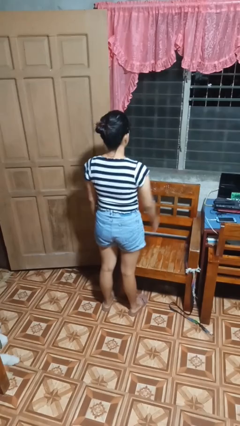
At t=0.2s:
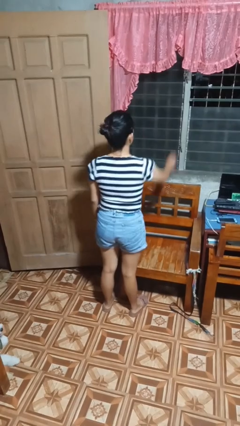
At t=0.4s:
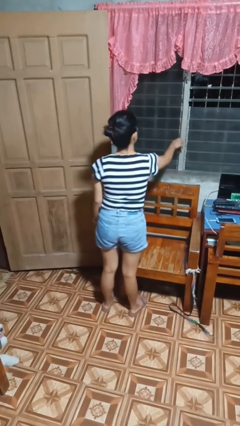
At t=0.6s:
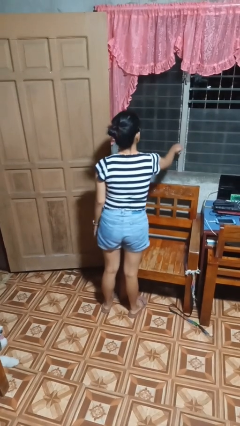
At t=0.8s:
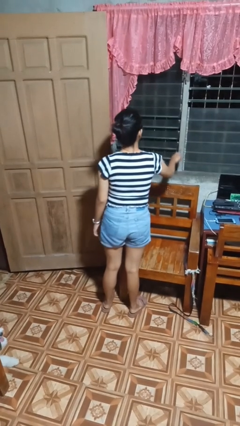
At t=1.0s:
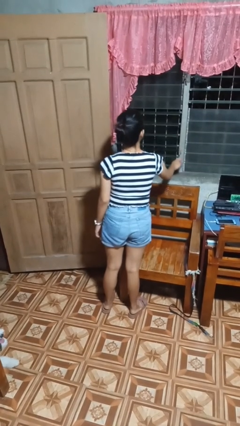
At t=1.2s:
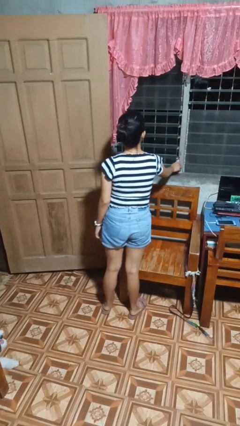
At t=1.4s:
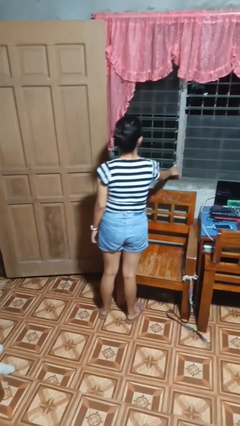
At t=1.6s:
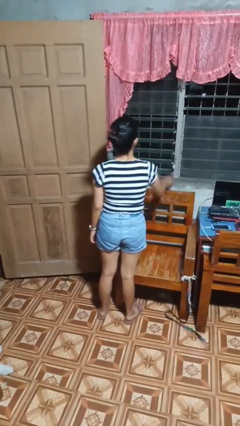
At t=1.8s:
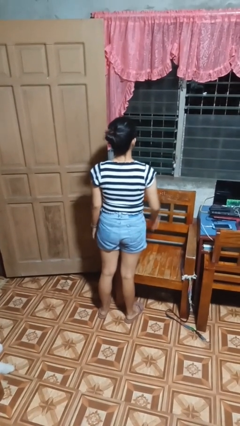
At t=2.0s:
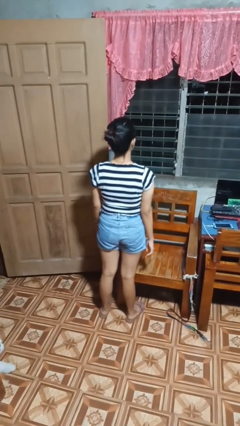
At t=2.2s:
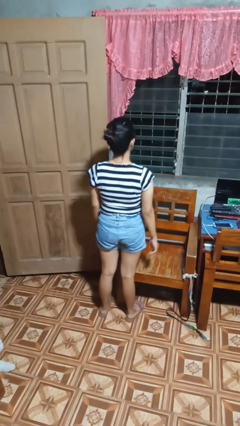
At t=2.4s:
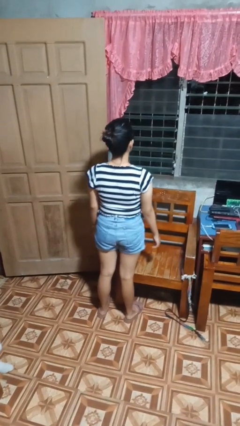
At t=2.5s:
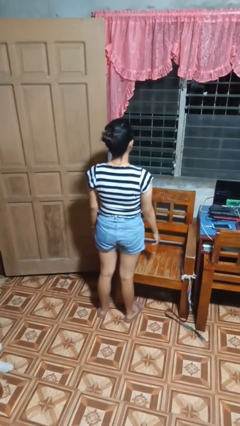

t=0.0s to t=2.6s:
person opens home window

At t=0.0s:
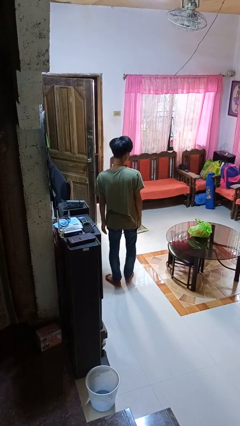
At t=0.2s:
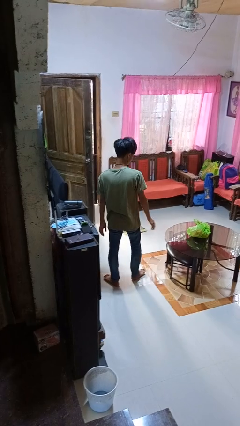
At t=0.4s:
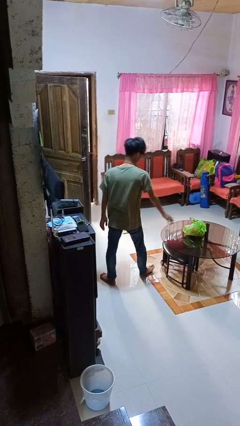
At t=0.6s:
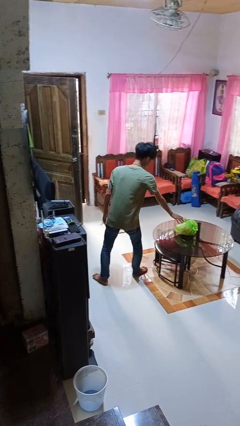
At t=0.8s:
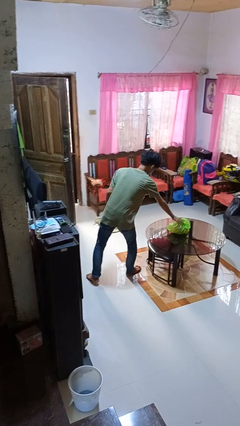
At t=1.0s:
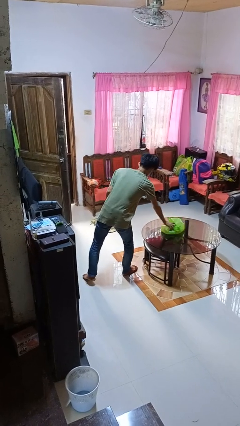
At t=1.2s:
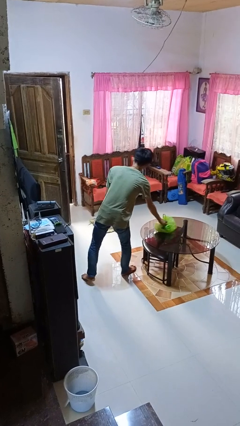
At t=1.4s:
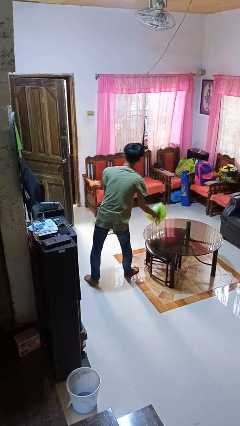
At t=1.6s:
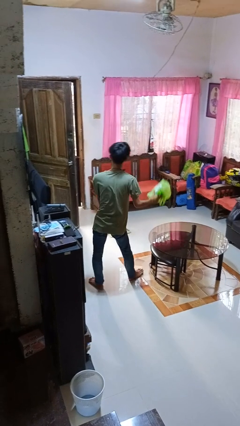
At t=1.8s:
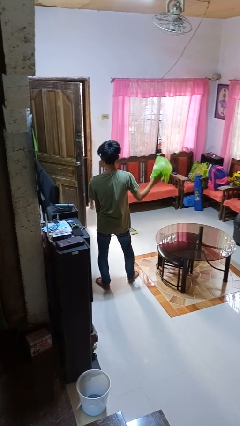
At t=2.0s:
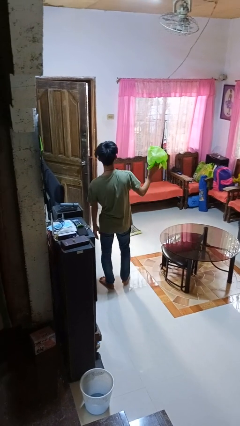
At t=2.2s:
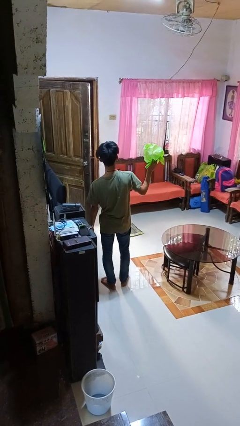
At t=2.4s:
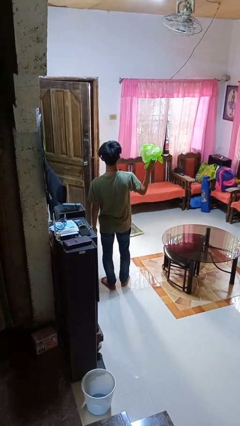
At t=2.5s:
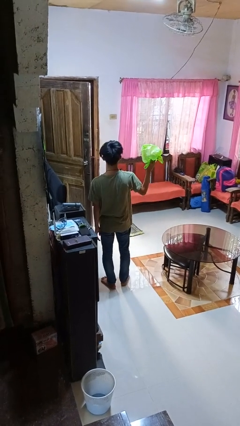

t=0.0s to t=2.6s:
person picks up object from table

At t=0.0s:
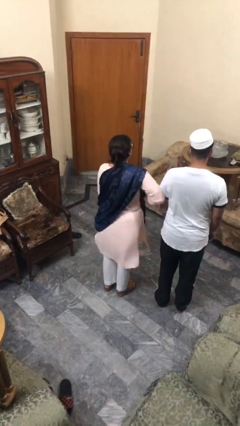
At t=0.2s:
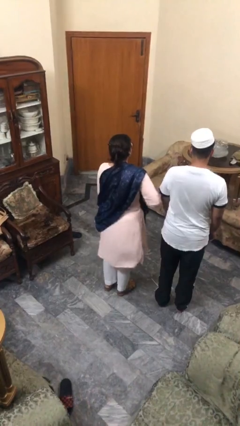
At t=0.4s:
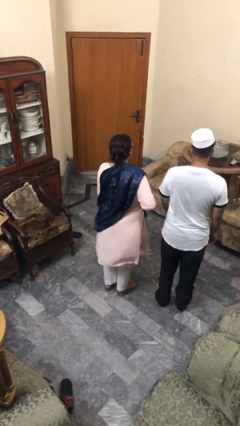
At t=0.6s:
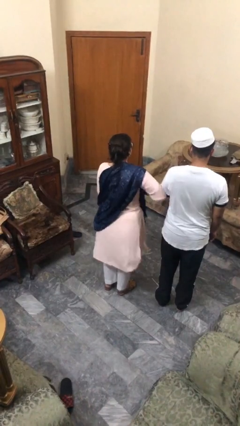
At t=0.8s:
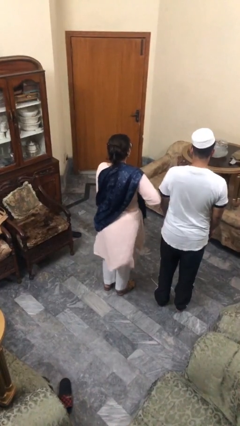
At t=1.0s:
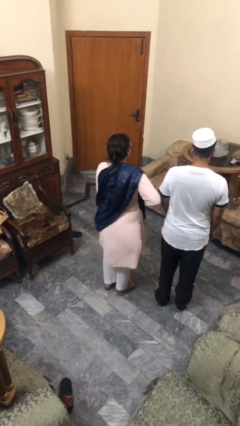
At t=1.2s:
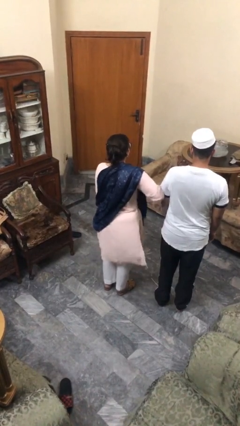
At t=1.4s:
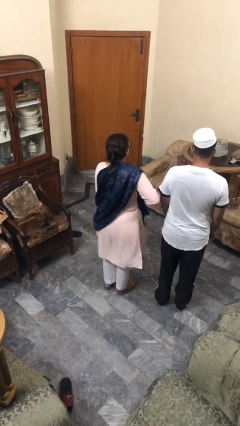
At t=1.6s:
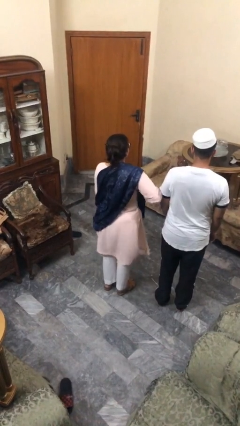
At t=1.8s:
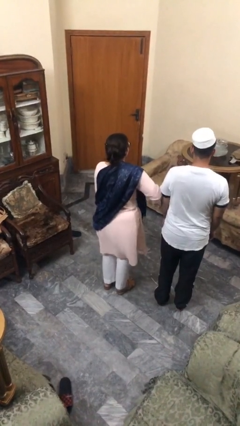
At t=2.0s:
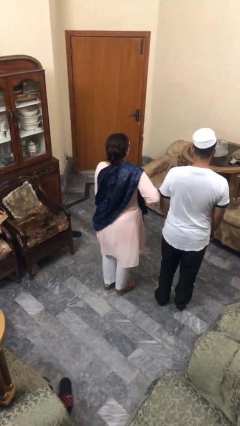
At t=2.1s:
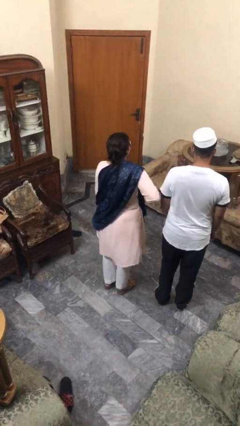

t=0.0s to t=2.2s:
person nudges person with elbow

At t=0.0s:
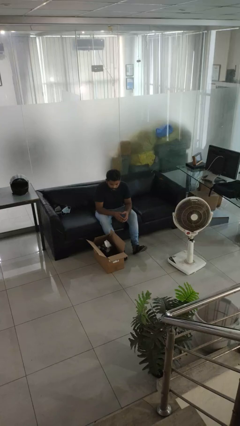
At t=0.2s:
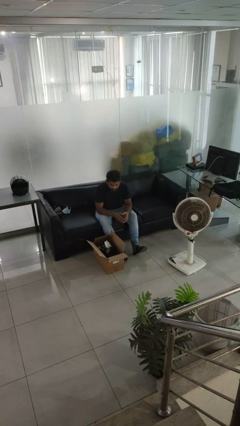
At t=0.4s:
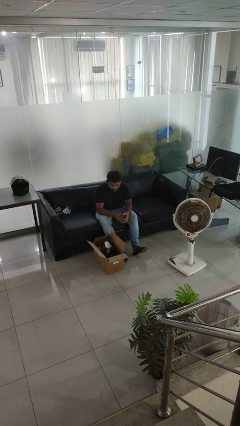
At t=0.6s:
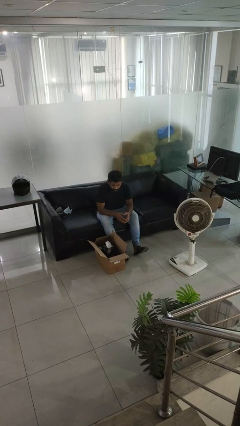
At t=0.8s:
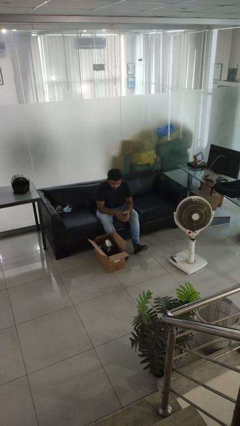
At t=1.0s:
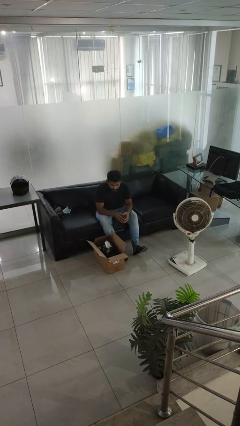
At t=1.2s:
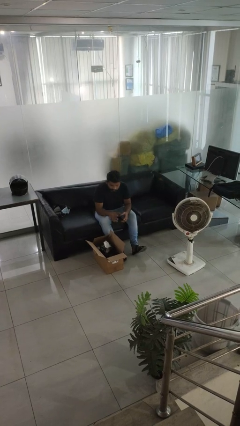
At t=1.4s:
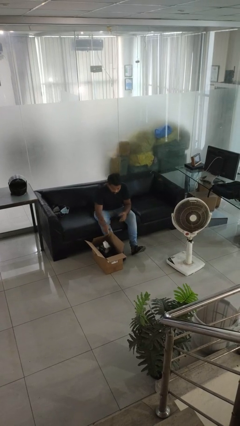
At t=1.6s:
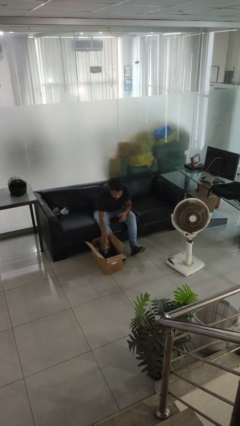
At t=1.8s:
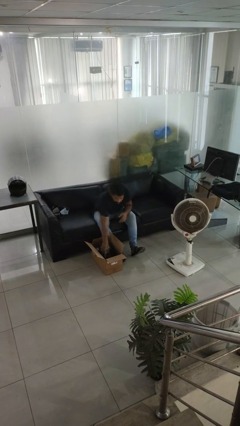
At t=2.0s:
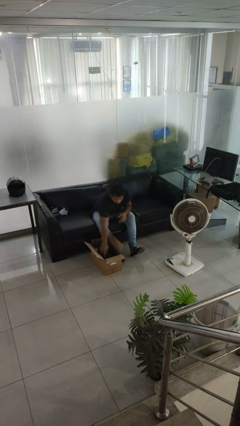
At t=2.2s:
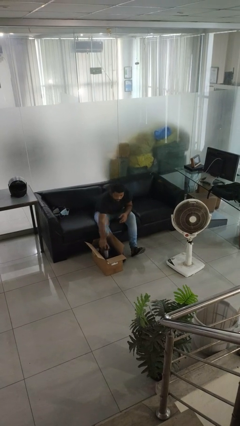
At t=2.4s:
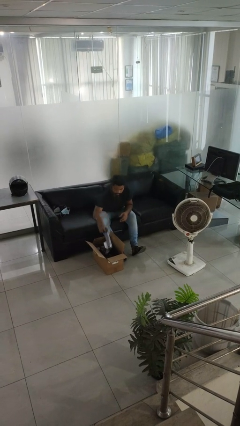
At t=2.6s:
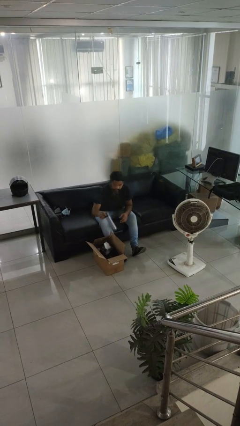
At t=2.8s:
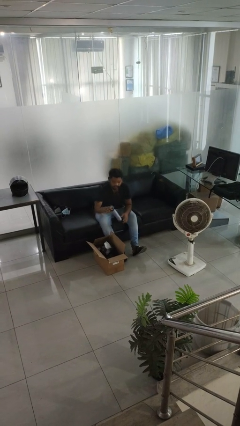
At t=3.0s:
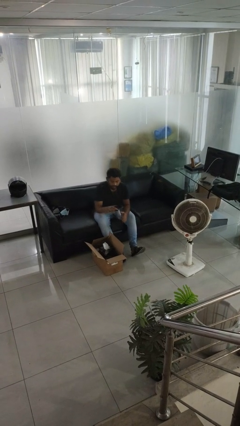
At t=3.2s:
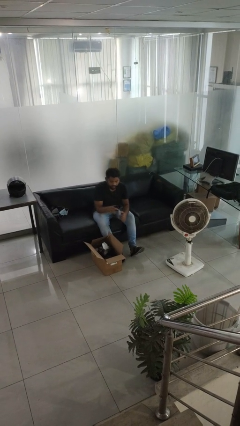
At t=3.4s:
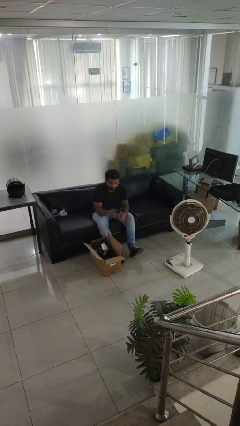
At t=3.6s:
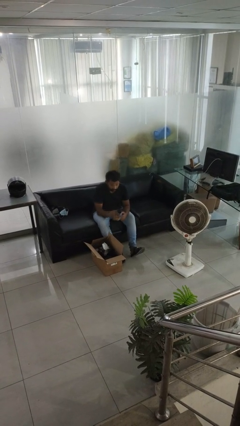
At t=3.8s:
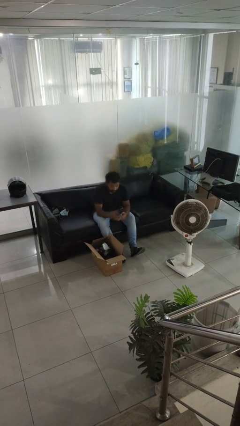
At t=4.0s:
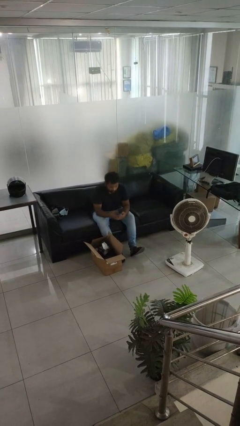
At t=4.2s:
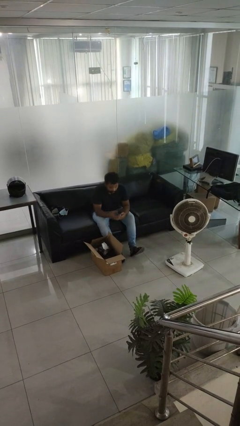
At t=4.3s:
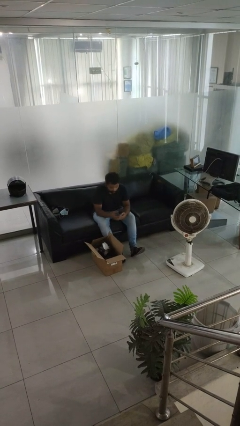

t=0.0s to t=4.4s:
person takes object from box

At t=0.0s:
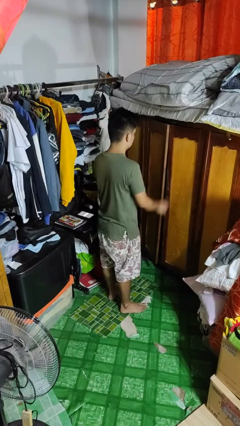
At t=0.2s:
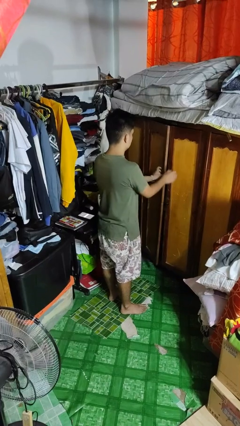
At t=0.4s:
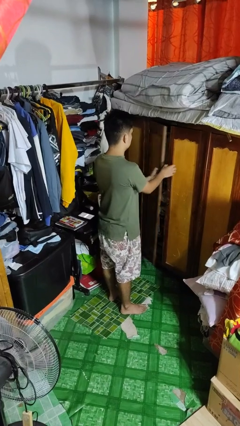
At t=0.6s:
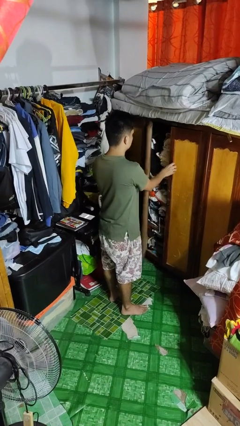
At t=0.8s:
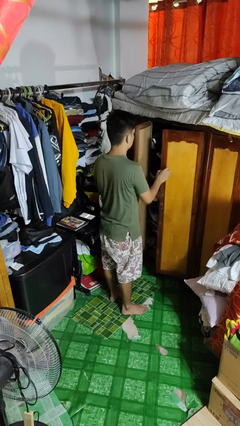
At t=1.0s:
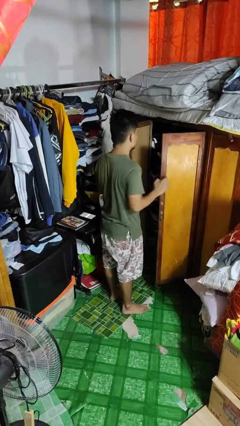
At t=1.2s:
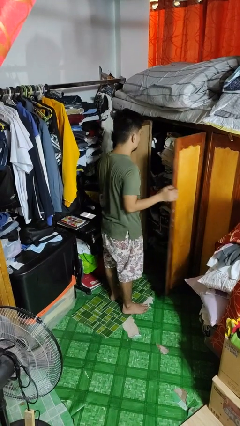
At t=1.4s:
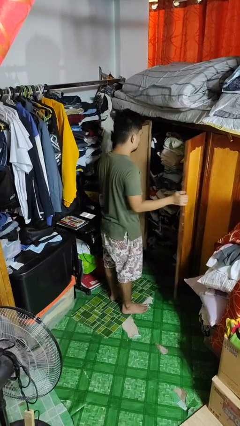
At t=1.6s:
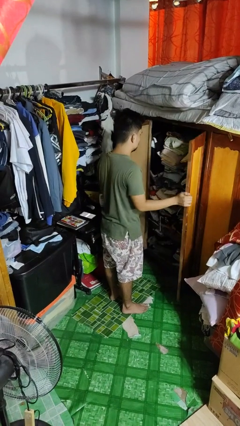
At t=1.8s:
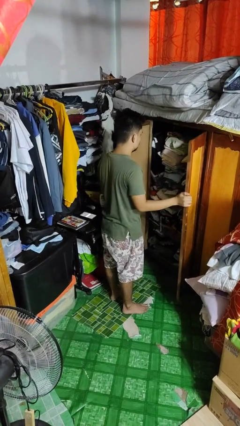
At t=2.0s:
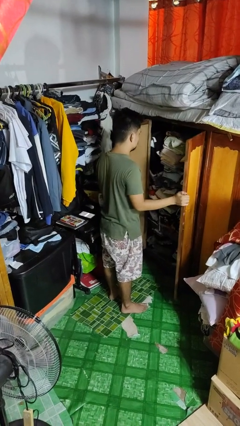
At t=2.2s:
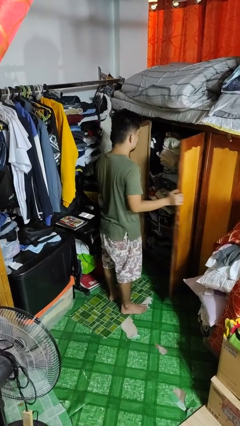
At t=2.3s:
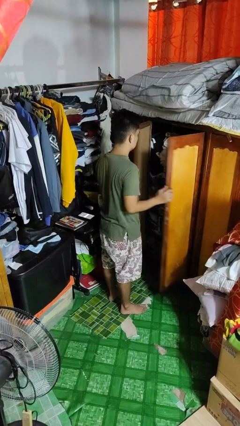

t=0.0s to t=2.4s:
person opens closet door

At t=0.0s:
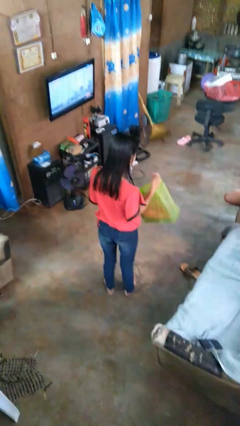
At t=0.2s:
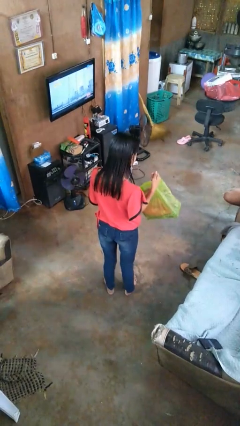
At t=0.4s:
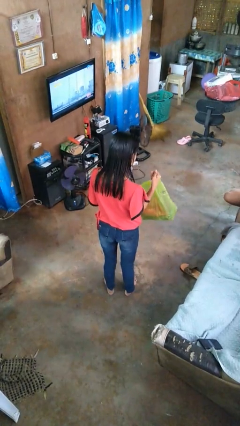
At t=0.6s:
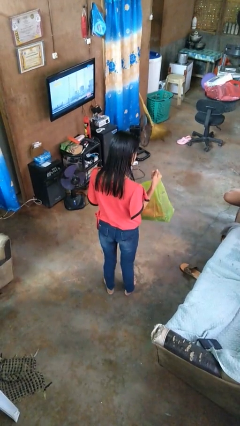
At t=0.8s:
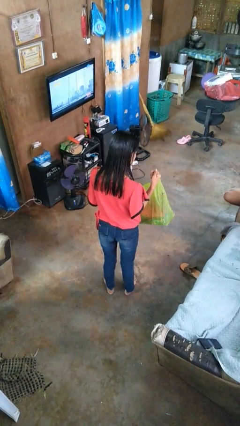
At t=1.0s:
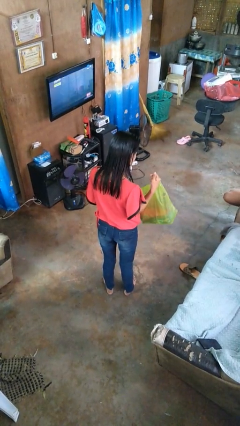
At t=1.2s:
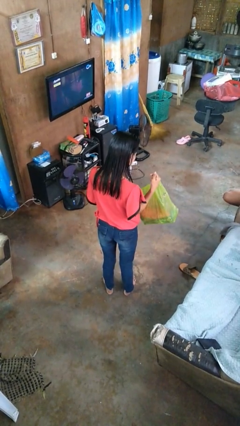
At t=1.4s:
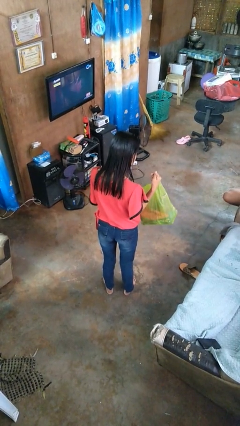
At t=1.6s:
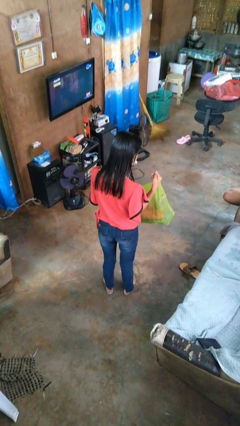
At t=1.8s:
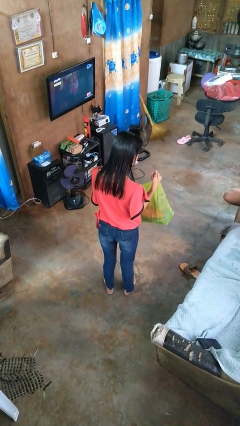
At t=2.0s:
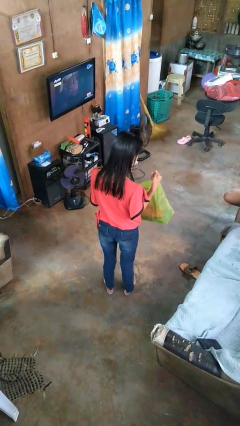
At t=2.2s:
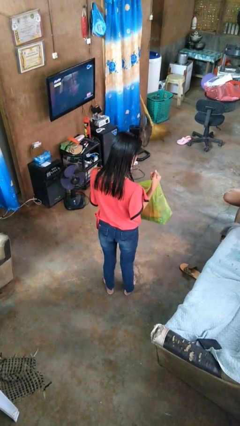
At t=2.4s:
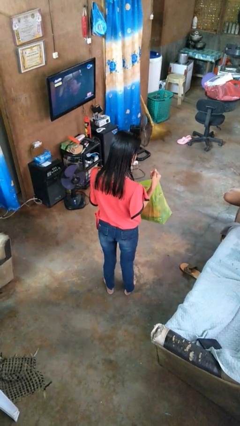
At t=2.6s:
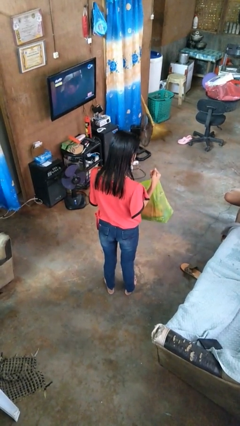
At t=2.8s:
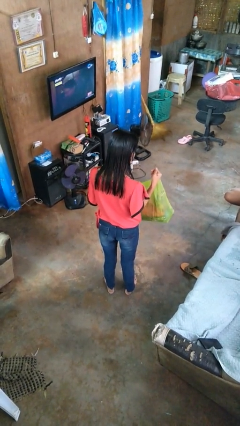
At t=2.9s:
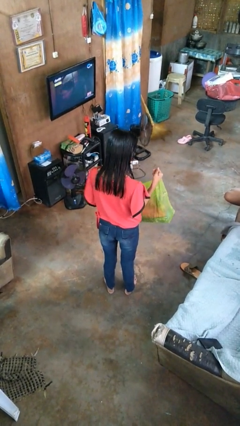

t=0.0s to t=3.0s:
person searches in bag

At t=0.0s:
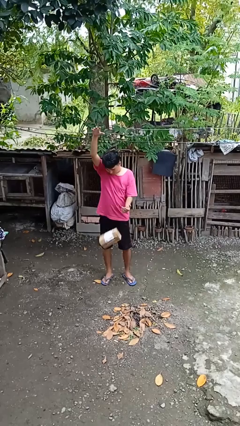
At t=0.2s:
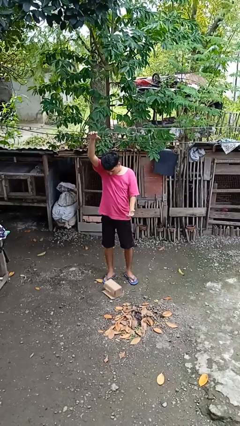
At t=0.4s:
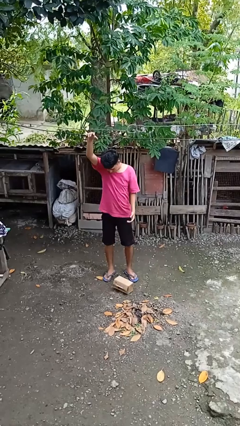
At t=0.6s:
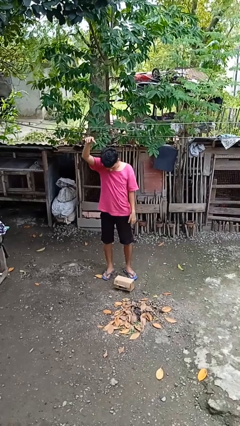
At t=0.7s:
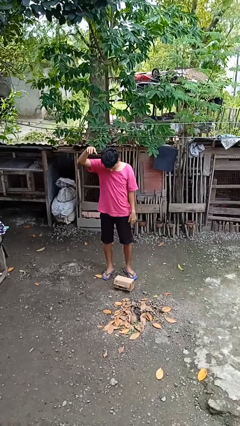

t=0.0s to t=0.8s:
person catches dropped object
